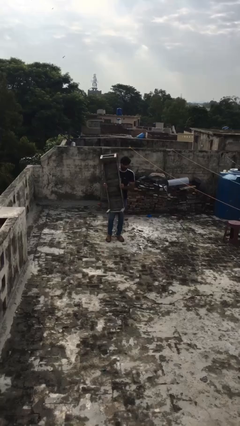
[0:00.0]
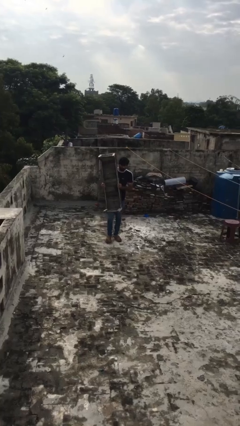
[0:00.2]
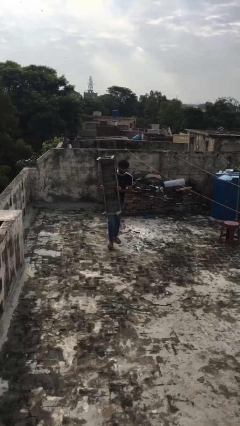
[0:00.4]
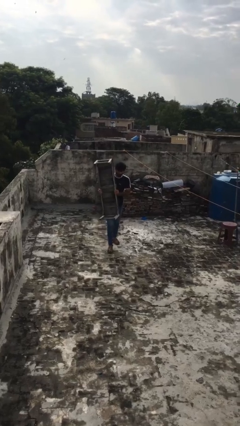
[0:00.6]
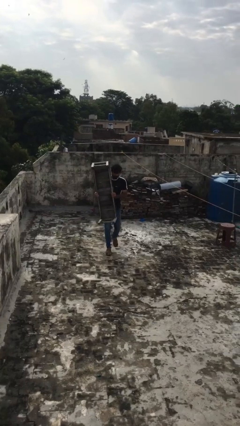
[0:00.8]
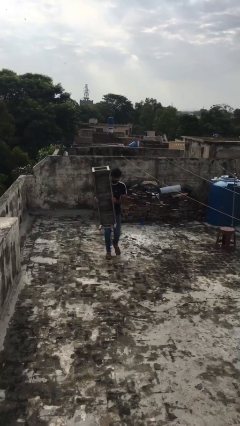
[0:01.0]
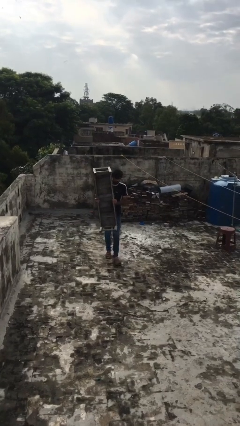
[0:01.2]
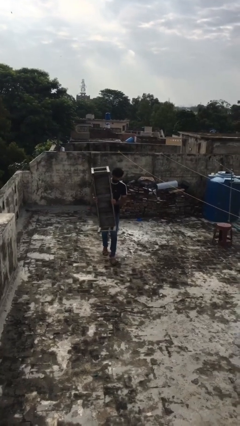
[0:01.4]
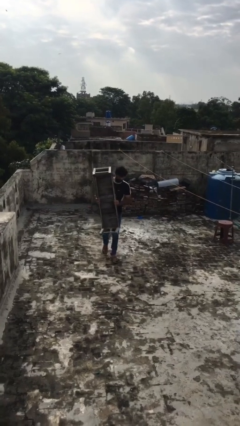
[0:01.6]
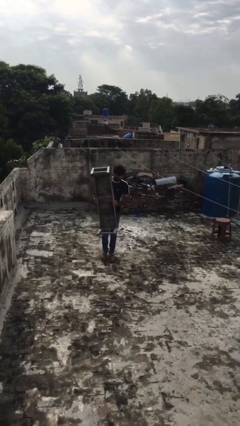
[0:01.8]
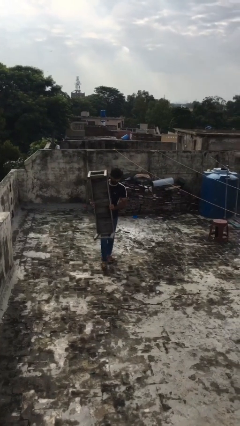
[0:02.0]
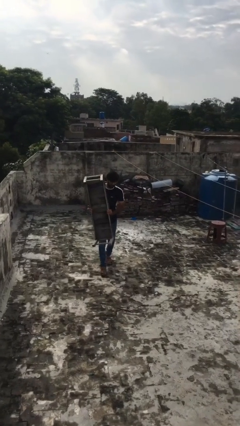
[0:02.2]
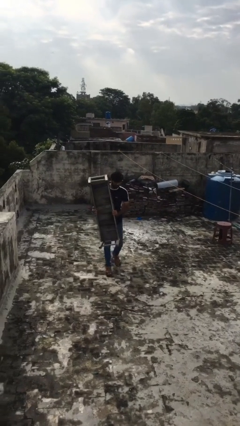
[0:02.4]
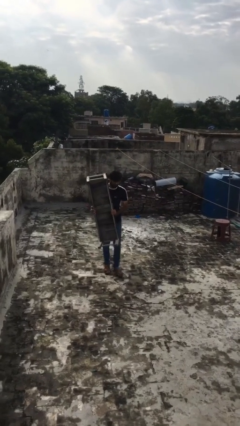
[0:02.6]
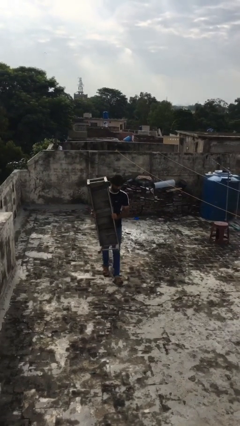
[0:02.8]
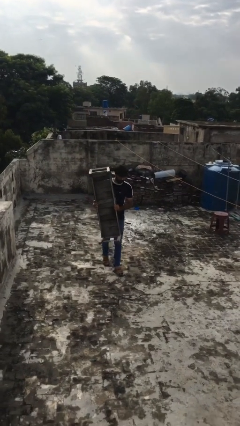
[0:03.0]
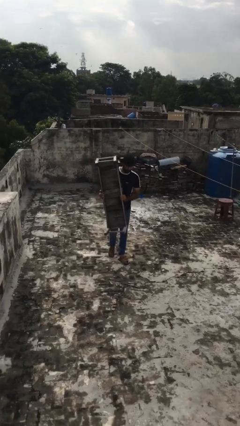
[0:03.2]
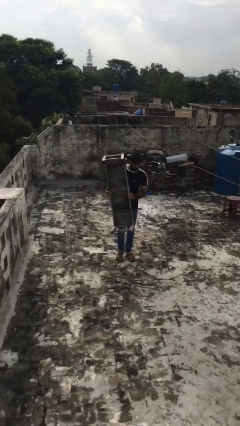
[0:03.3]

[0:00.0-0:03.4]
person carries heavy object

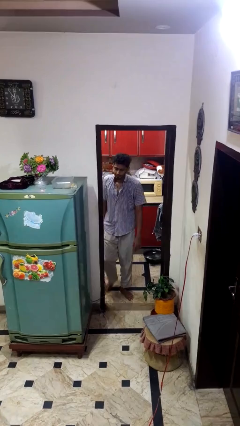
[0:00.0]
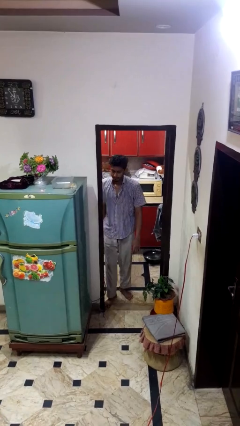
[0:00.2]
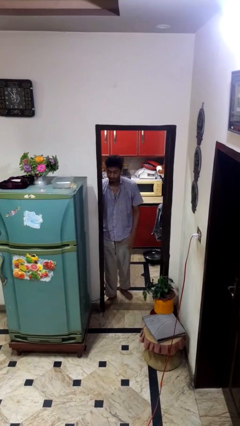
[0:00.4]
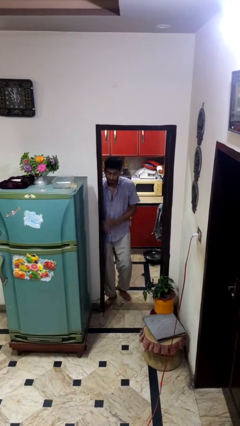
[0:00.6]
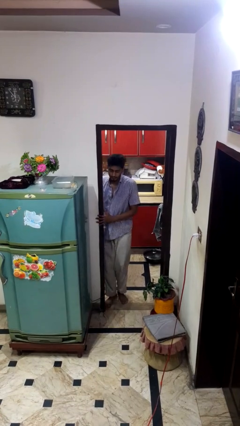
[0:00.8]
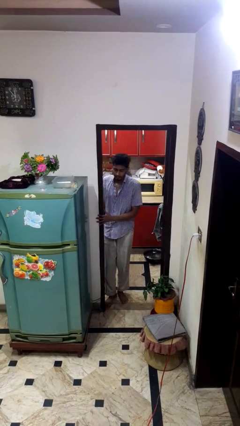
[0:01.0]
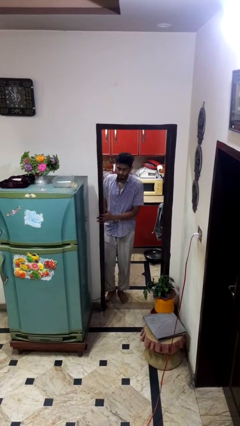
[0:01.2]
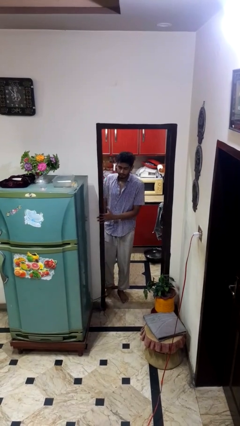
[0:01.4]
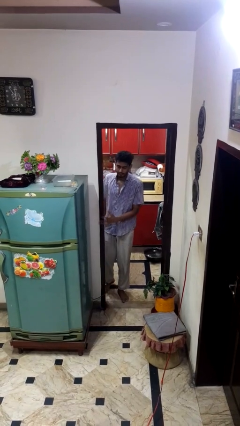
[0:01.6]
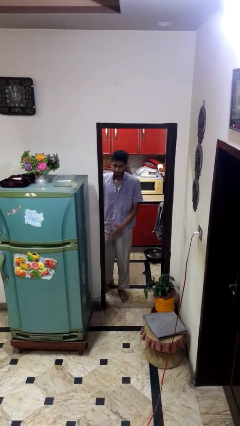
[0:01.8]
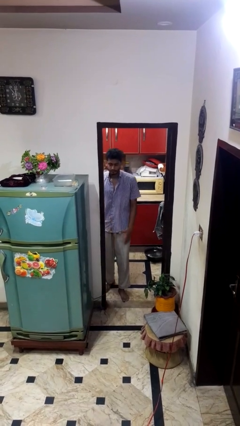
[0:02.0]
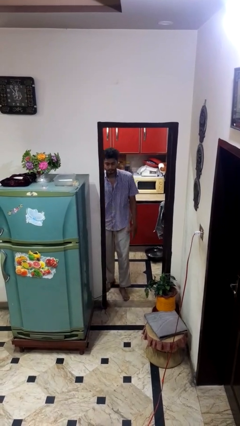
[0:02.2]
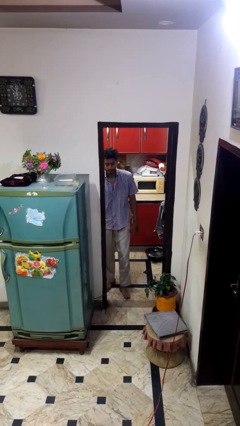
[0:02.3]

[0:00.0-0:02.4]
person bumps into wall

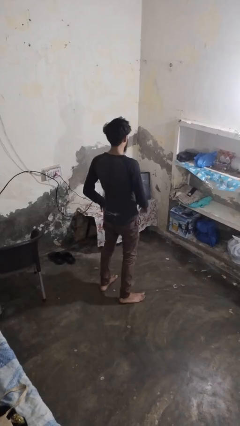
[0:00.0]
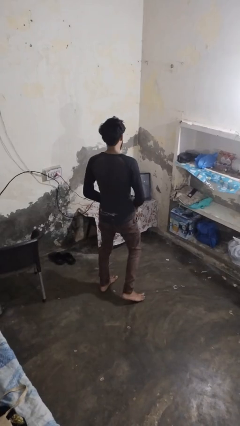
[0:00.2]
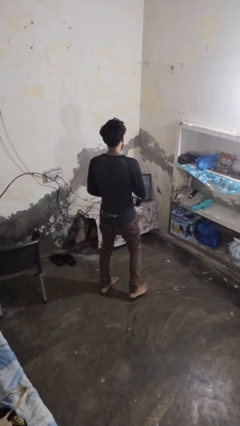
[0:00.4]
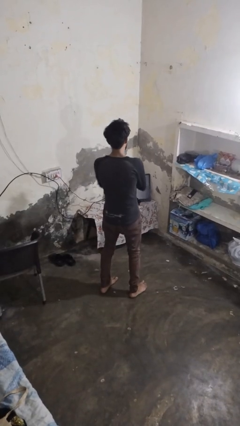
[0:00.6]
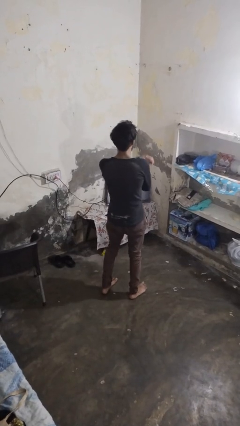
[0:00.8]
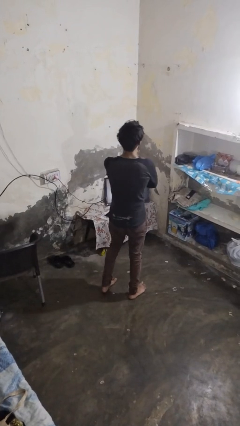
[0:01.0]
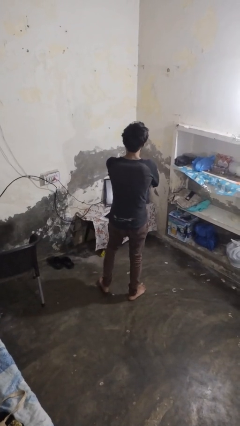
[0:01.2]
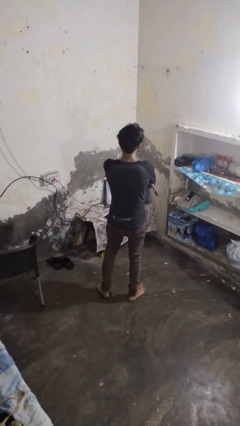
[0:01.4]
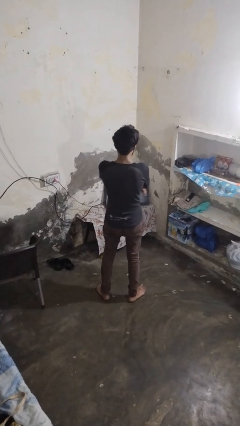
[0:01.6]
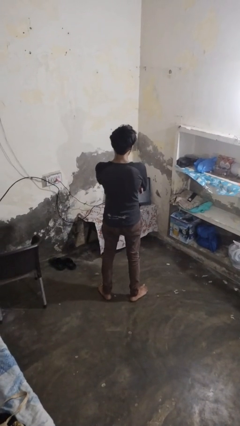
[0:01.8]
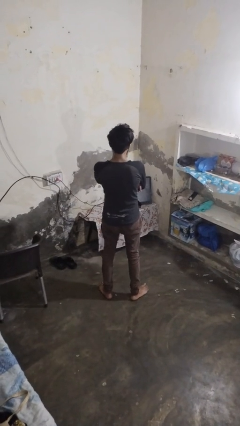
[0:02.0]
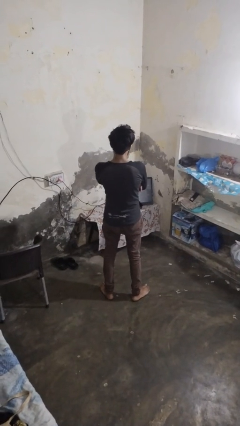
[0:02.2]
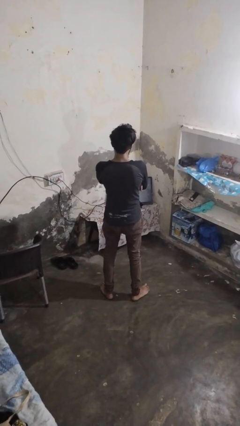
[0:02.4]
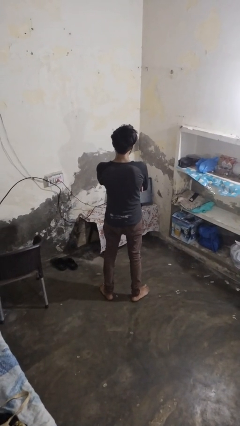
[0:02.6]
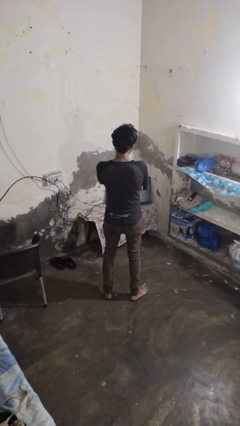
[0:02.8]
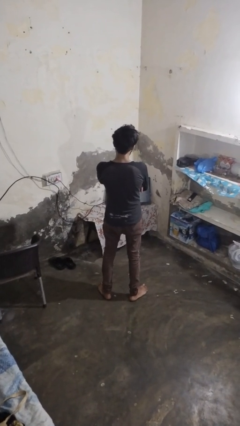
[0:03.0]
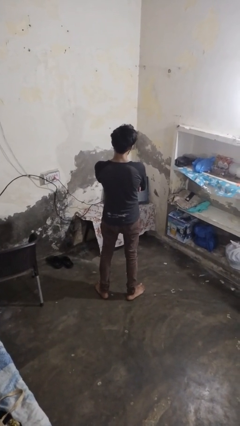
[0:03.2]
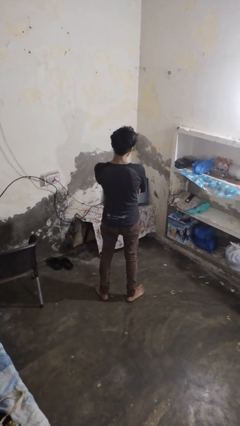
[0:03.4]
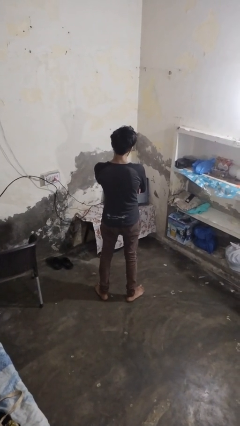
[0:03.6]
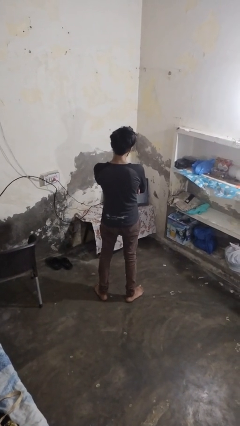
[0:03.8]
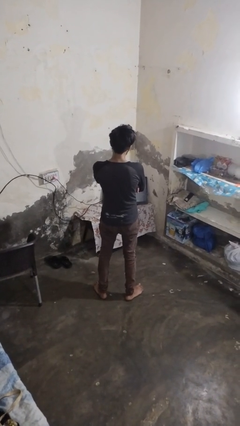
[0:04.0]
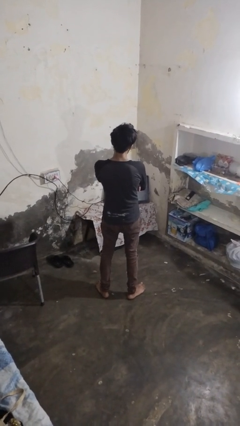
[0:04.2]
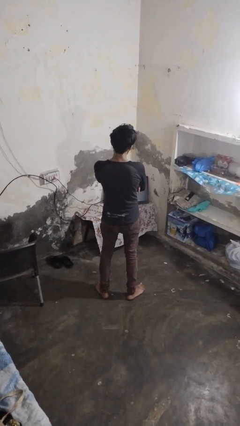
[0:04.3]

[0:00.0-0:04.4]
person crosses arms

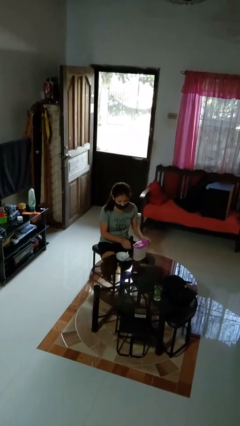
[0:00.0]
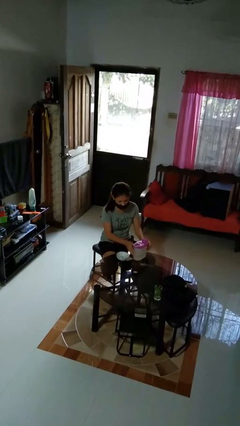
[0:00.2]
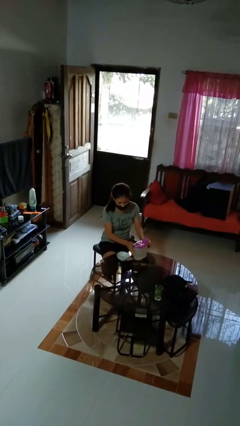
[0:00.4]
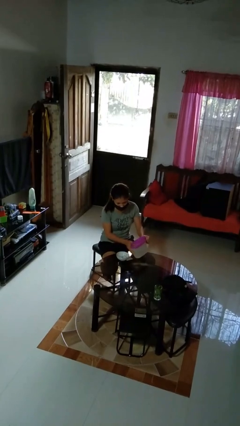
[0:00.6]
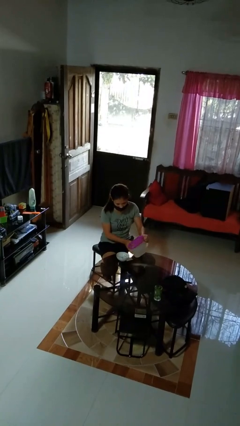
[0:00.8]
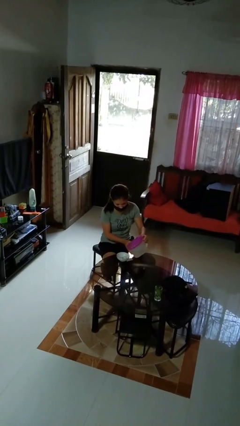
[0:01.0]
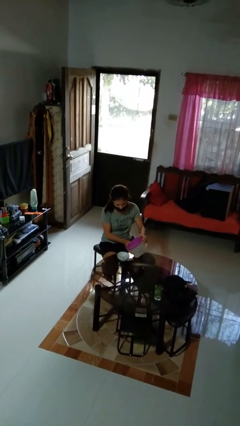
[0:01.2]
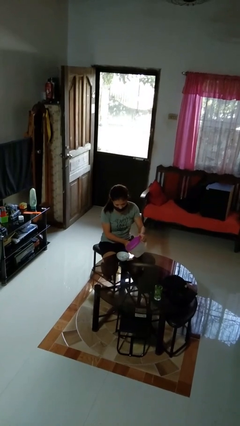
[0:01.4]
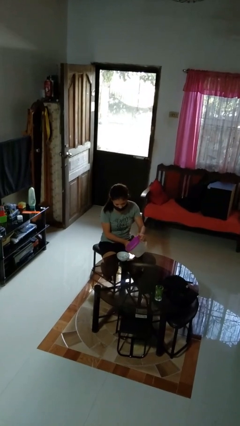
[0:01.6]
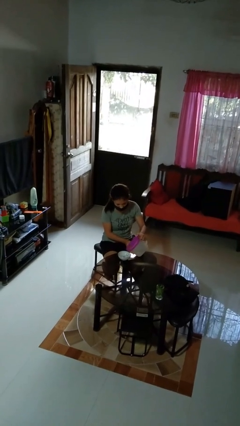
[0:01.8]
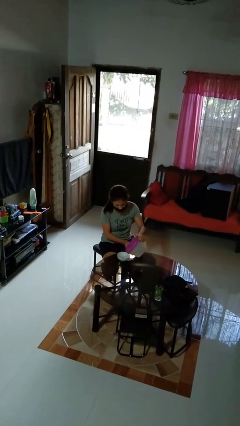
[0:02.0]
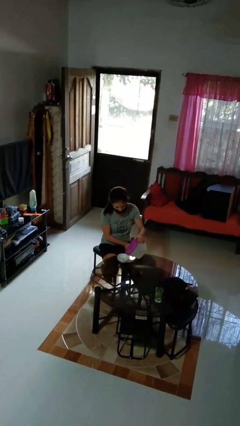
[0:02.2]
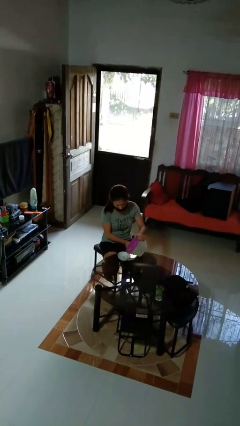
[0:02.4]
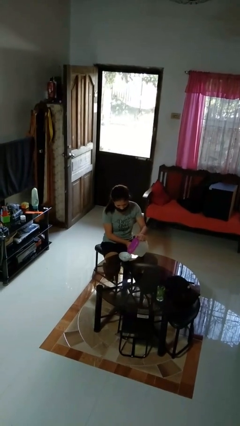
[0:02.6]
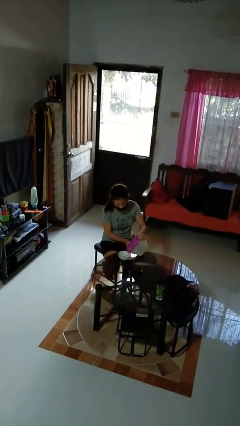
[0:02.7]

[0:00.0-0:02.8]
person pours into bowl

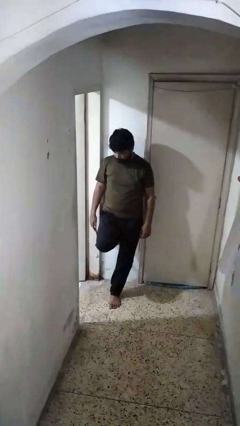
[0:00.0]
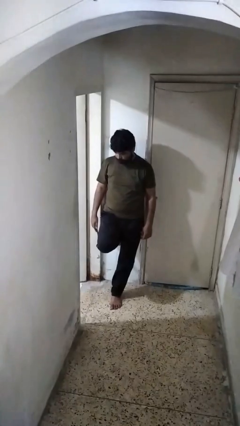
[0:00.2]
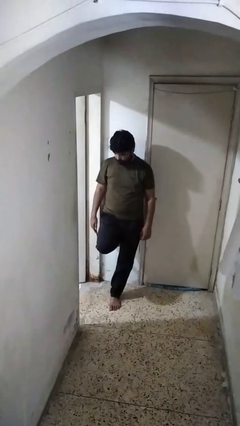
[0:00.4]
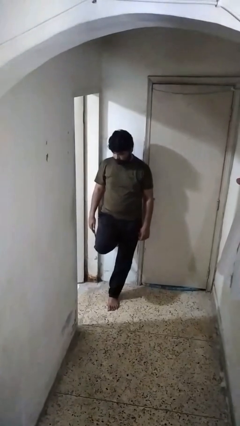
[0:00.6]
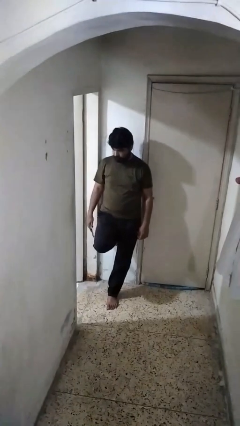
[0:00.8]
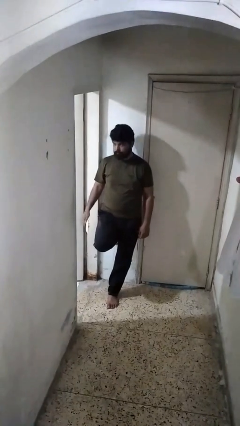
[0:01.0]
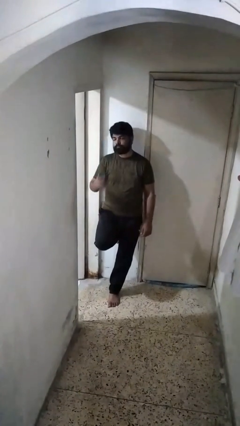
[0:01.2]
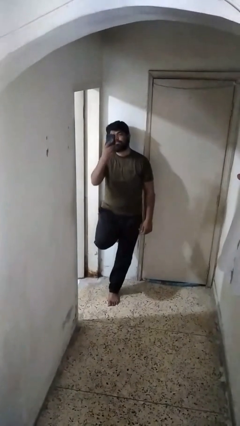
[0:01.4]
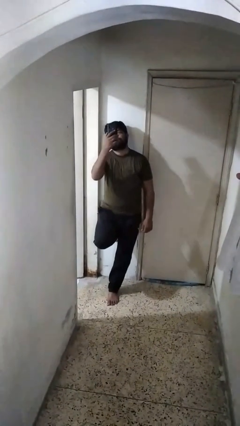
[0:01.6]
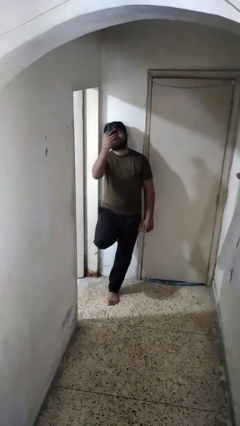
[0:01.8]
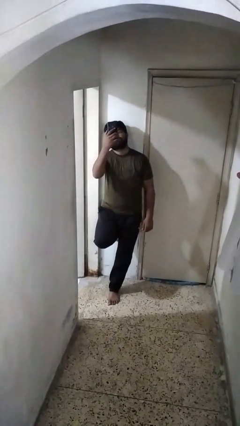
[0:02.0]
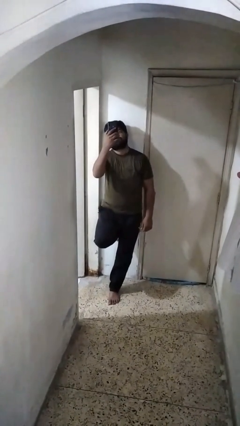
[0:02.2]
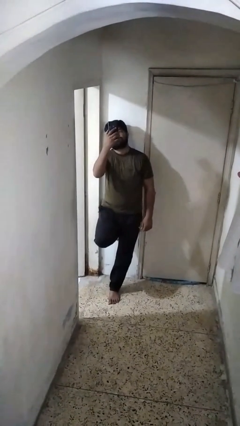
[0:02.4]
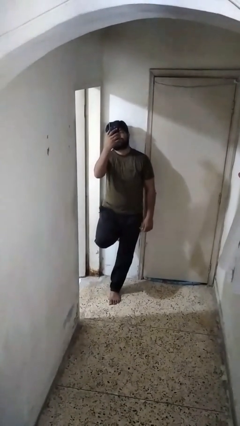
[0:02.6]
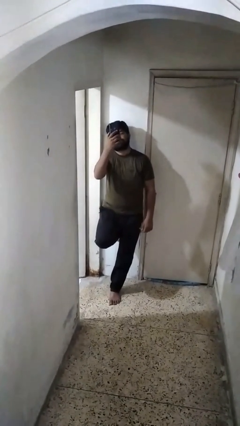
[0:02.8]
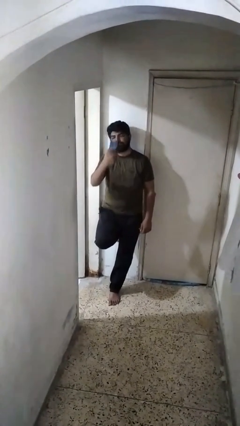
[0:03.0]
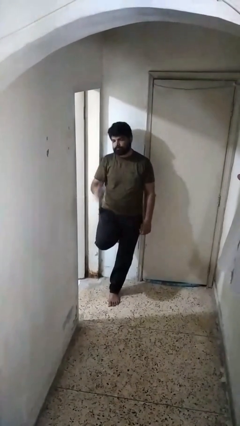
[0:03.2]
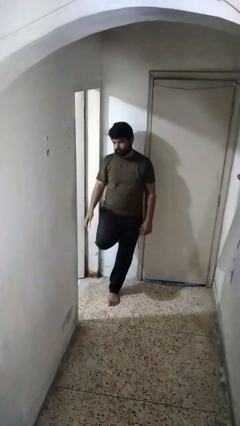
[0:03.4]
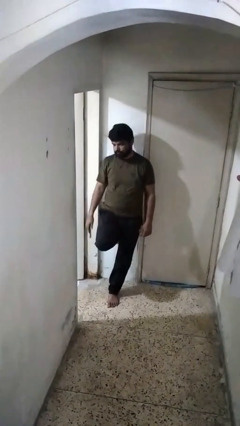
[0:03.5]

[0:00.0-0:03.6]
person takes selfie

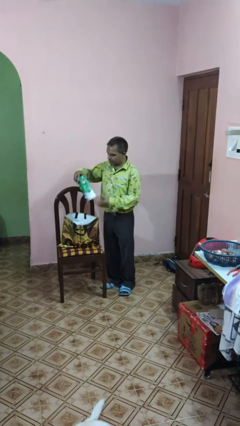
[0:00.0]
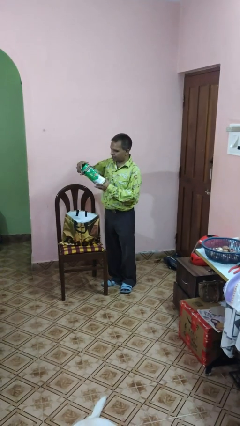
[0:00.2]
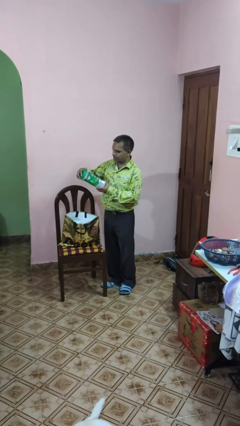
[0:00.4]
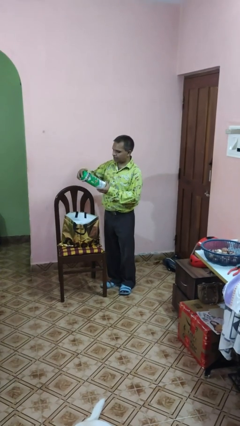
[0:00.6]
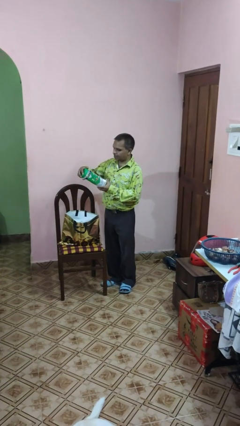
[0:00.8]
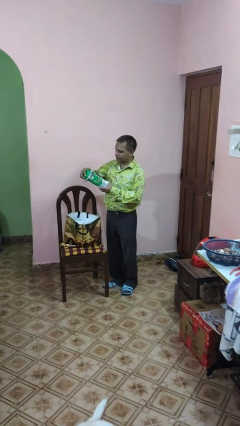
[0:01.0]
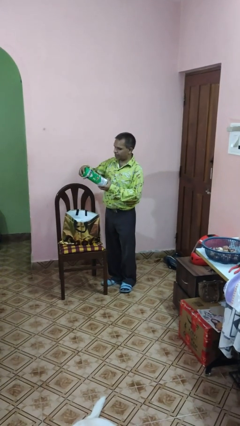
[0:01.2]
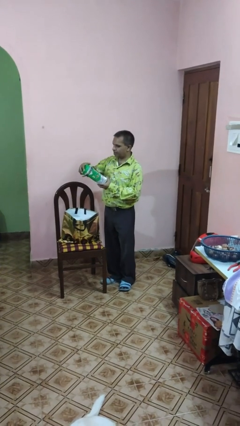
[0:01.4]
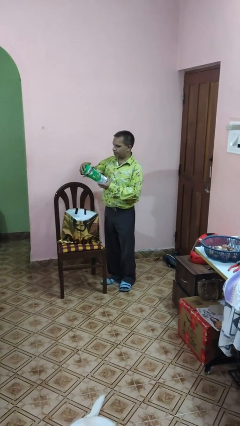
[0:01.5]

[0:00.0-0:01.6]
person takes object from bag
